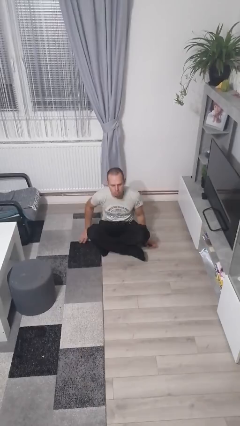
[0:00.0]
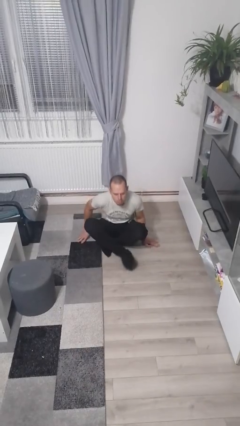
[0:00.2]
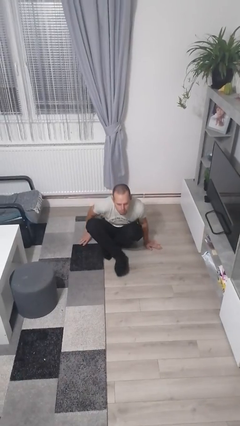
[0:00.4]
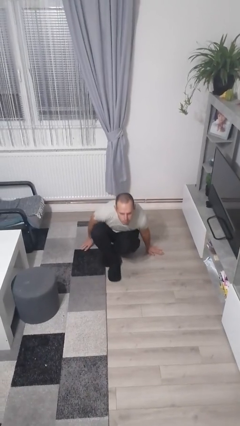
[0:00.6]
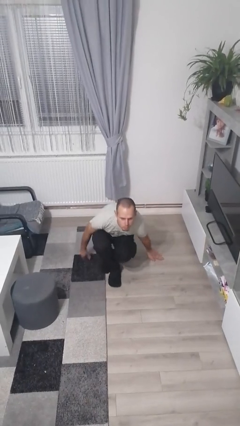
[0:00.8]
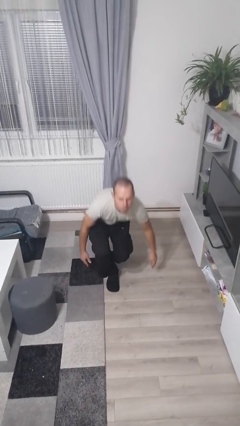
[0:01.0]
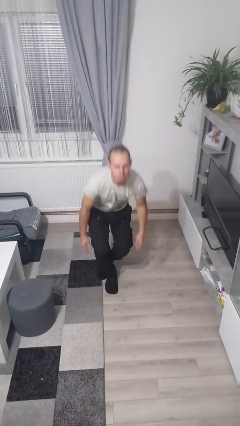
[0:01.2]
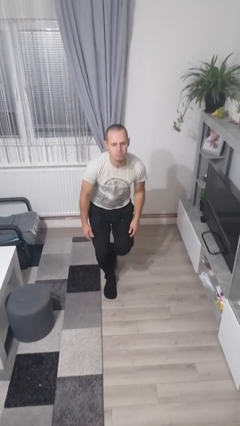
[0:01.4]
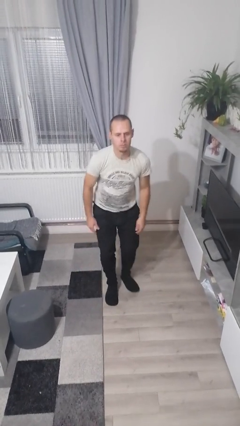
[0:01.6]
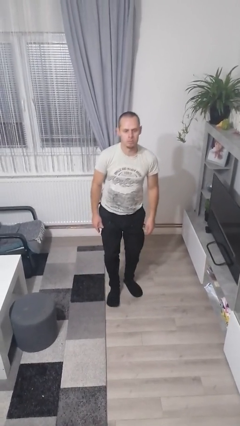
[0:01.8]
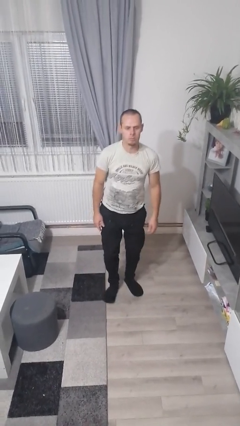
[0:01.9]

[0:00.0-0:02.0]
person stands up from floor

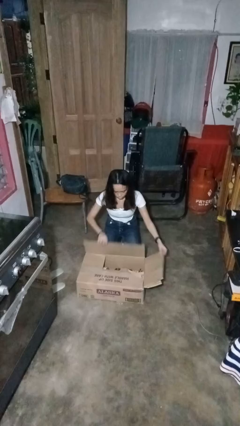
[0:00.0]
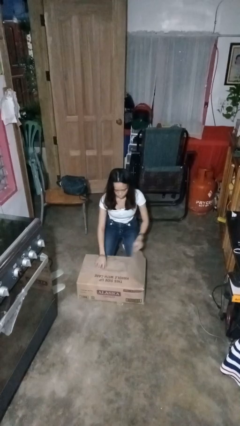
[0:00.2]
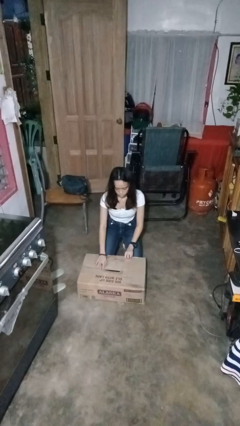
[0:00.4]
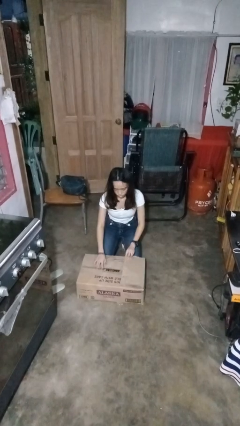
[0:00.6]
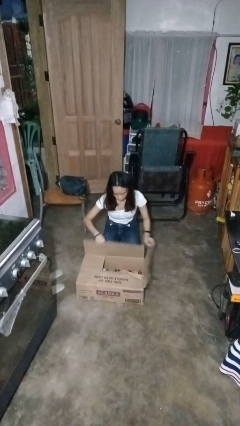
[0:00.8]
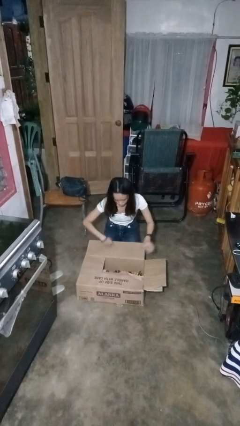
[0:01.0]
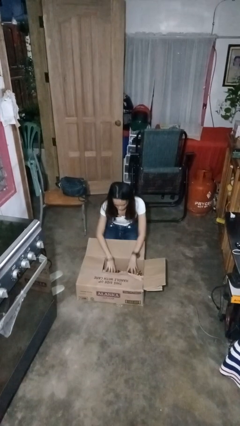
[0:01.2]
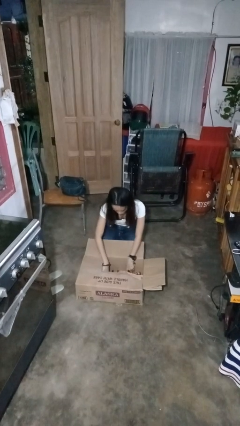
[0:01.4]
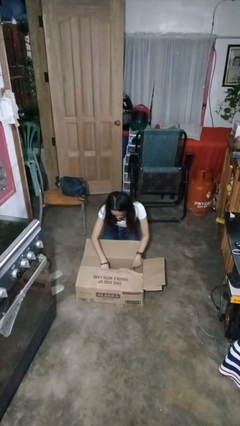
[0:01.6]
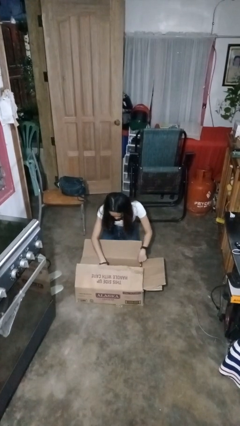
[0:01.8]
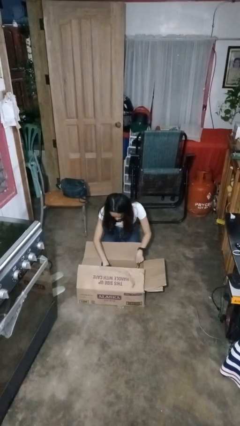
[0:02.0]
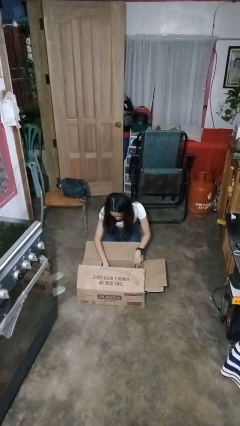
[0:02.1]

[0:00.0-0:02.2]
person searches in box

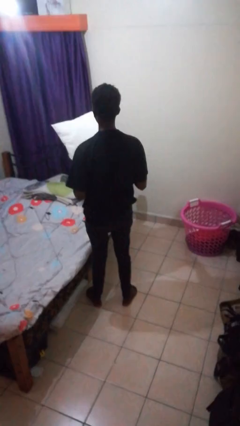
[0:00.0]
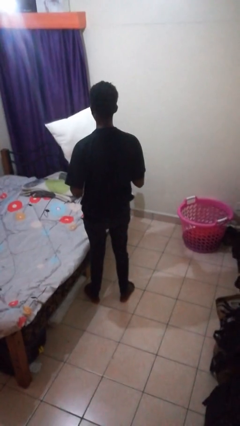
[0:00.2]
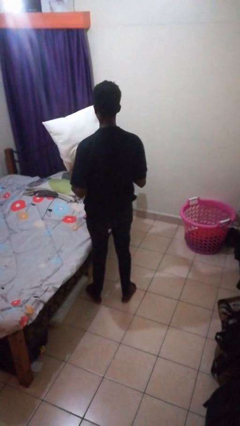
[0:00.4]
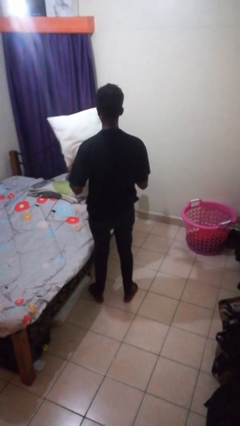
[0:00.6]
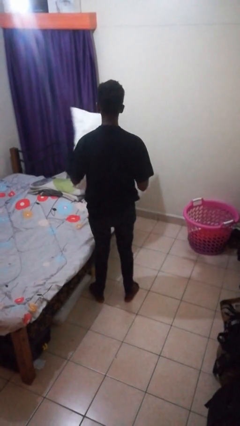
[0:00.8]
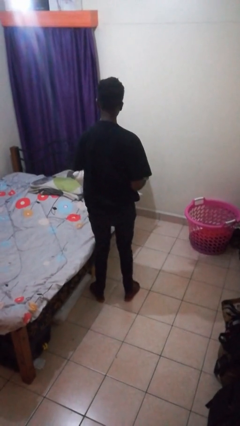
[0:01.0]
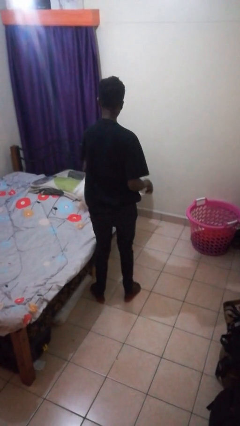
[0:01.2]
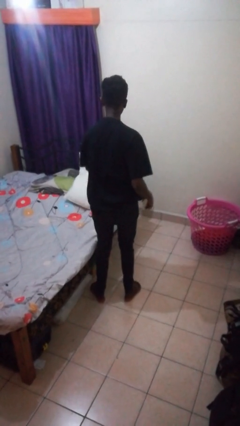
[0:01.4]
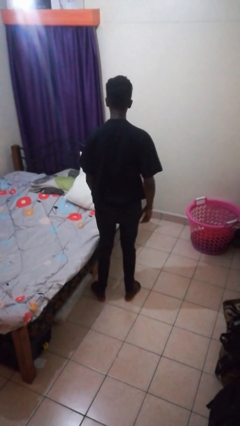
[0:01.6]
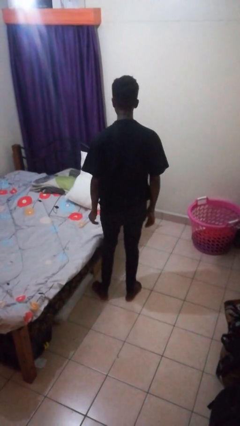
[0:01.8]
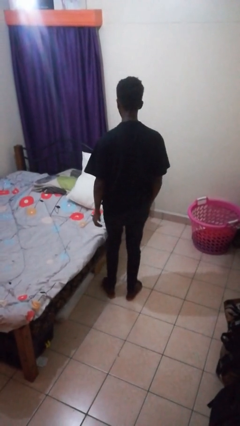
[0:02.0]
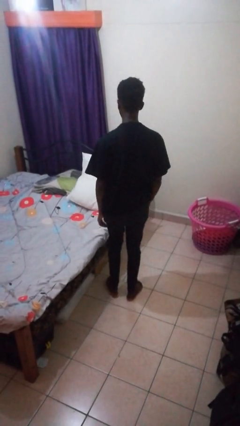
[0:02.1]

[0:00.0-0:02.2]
person puts down object on bed

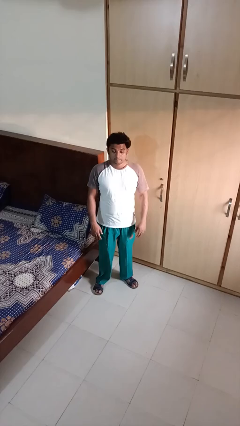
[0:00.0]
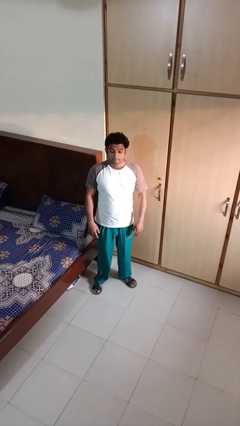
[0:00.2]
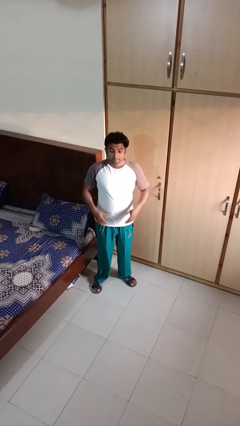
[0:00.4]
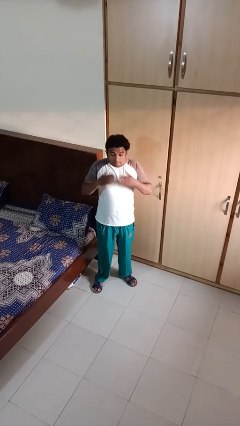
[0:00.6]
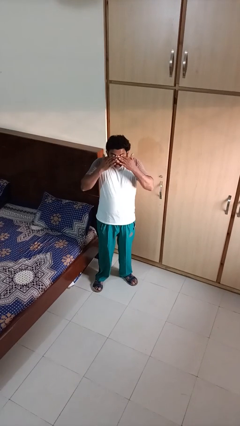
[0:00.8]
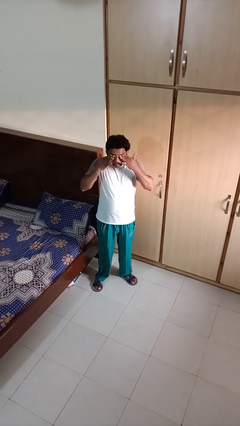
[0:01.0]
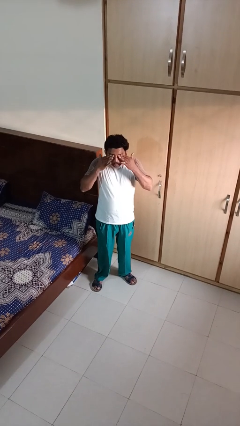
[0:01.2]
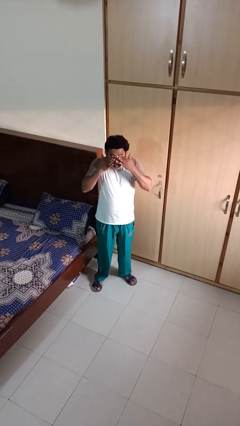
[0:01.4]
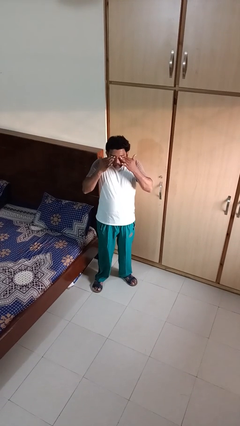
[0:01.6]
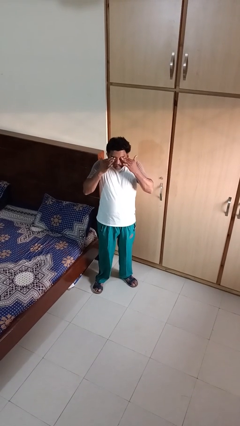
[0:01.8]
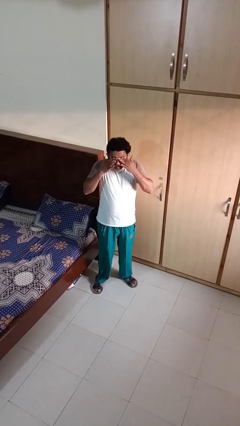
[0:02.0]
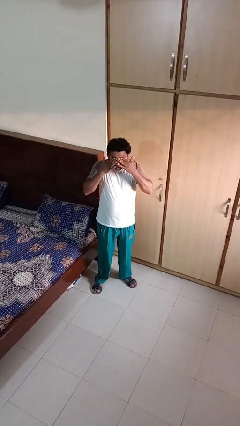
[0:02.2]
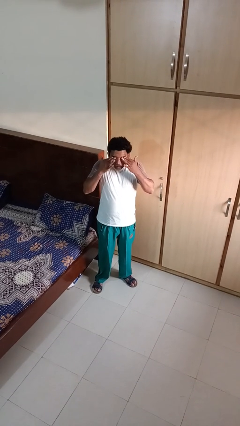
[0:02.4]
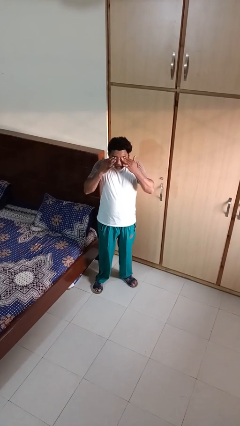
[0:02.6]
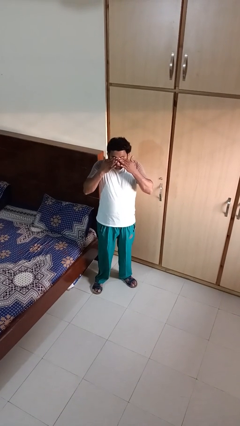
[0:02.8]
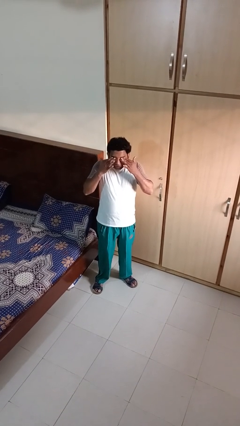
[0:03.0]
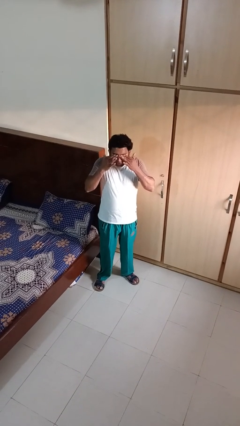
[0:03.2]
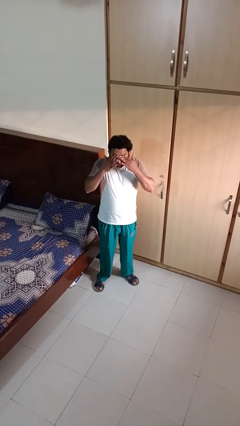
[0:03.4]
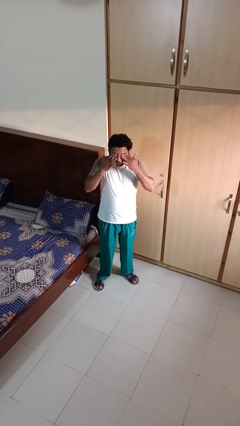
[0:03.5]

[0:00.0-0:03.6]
person rubs eyes

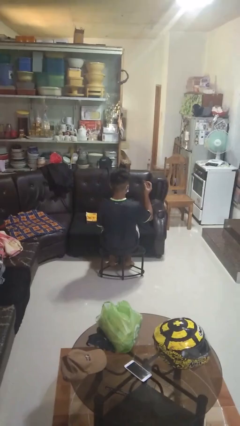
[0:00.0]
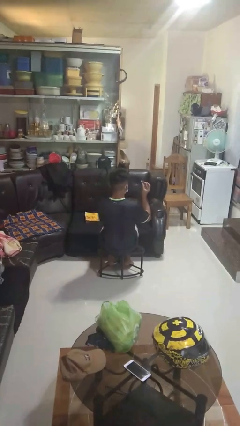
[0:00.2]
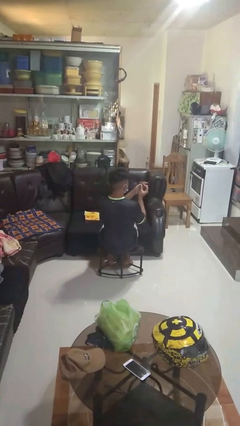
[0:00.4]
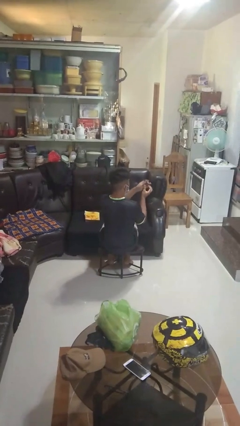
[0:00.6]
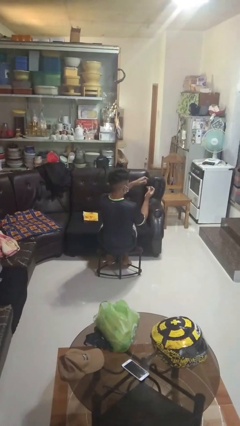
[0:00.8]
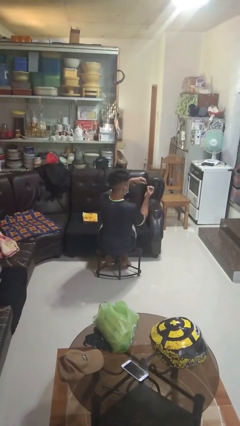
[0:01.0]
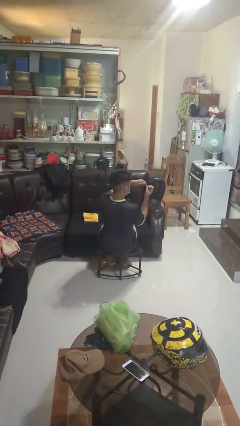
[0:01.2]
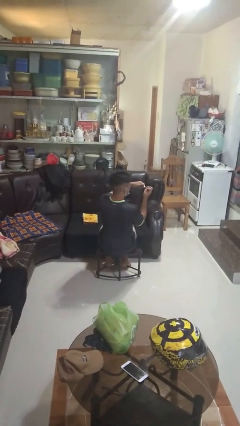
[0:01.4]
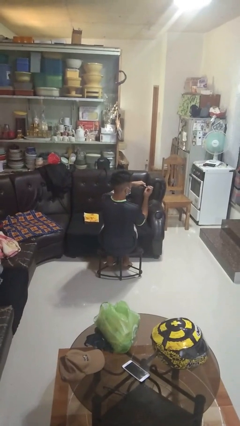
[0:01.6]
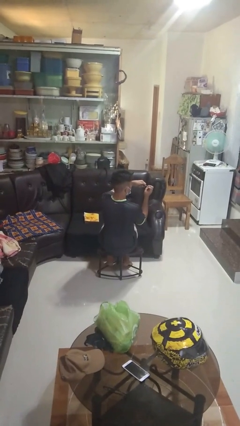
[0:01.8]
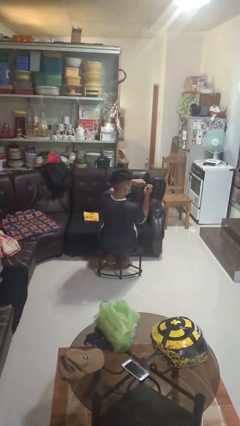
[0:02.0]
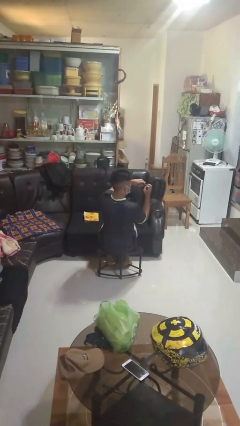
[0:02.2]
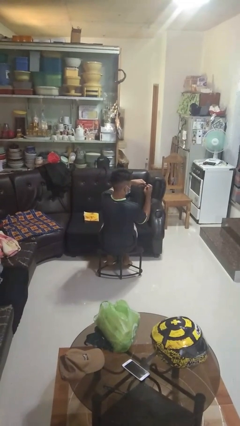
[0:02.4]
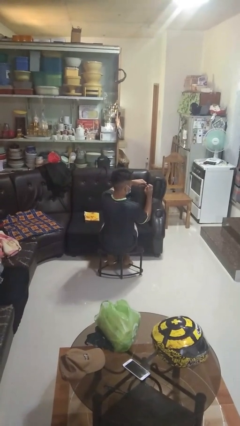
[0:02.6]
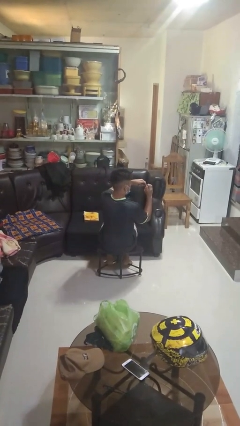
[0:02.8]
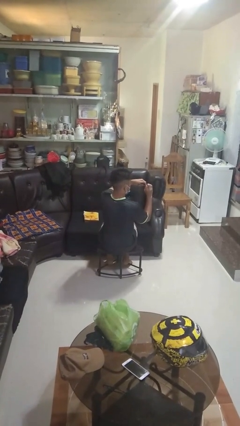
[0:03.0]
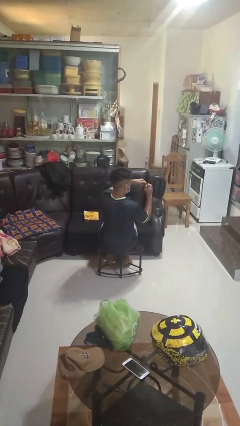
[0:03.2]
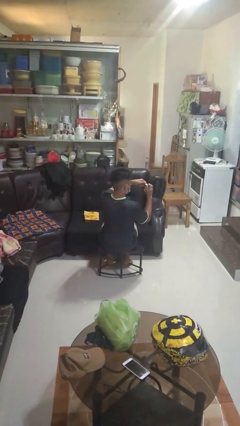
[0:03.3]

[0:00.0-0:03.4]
person clips fingernails

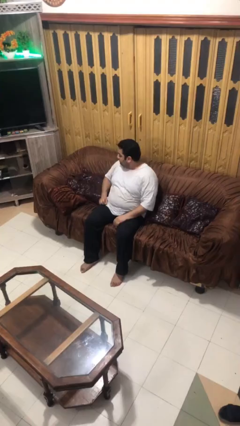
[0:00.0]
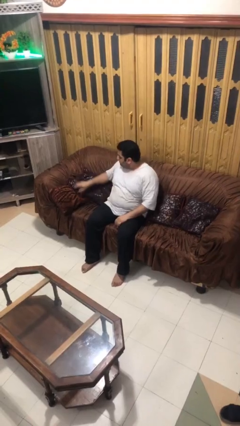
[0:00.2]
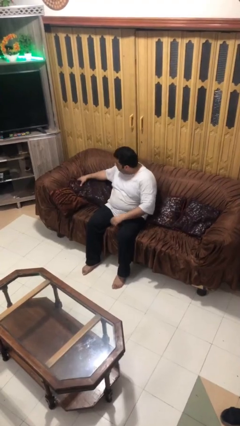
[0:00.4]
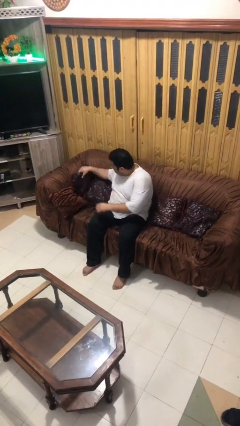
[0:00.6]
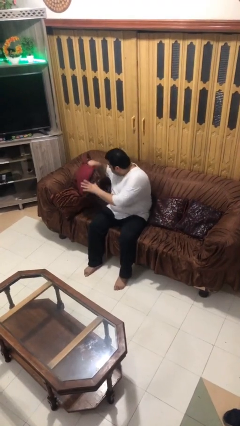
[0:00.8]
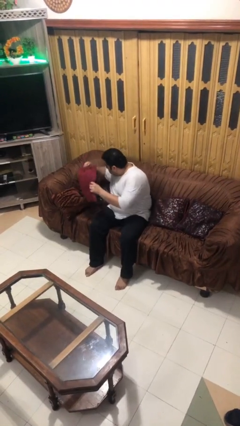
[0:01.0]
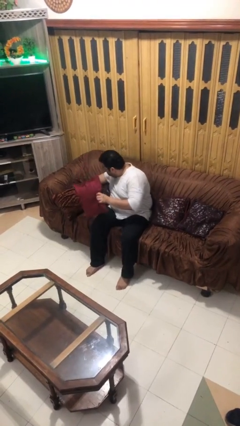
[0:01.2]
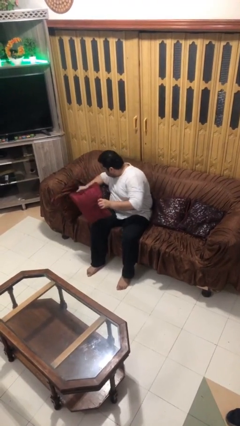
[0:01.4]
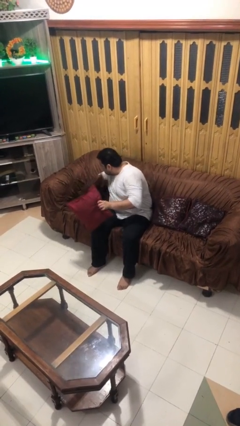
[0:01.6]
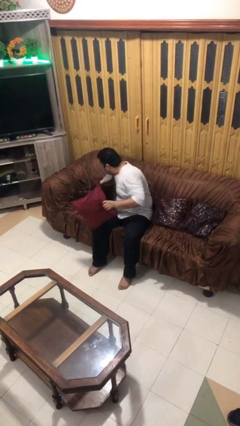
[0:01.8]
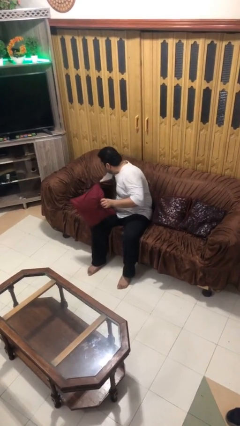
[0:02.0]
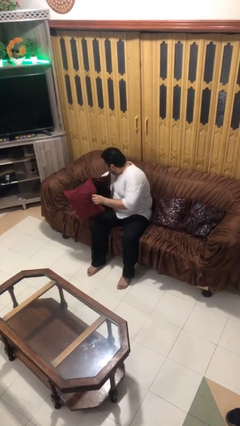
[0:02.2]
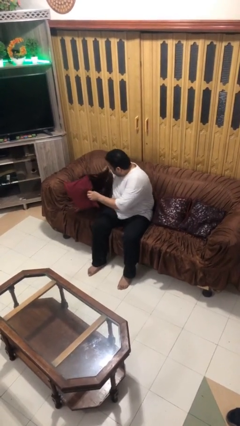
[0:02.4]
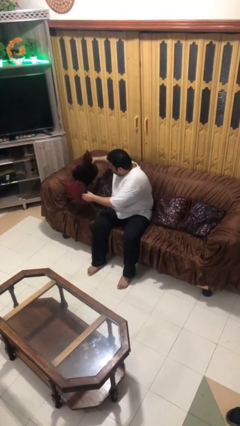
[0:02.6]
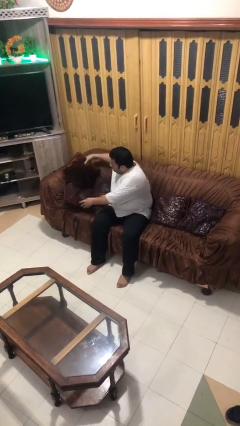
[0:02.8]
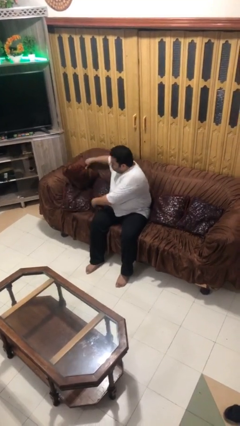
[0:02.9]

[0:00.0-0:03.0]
person searches in couch

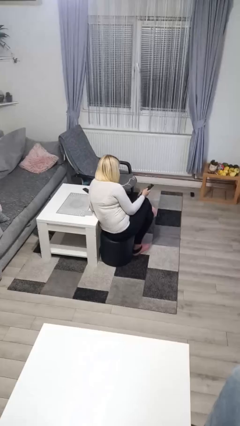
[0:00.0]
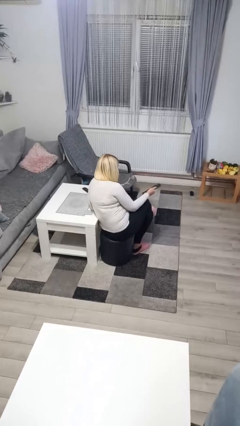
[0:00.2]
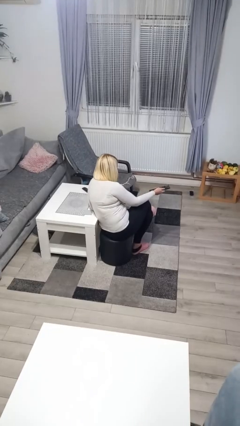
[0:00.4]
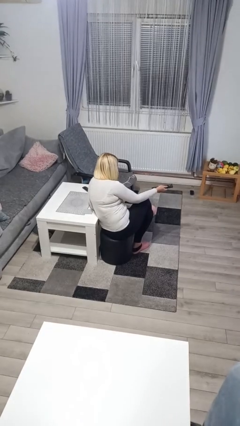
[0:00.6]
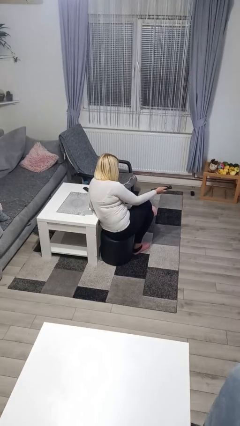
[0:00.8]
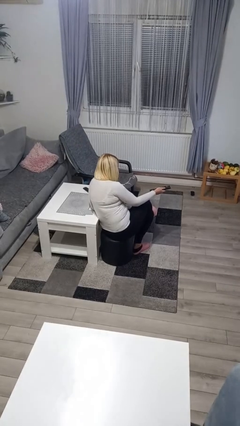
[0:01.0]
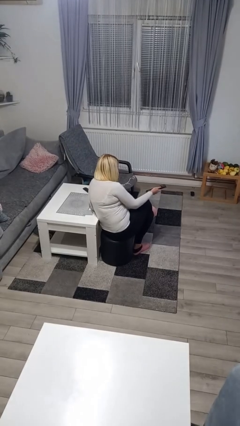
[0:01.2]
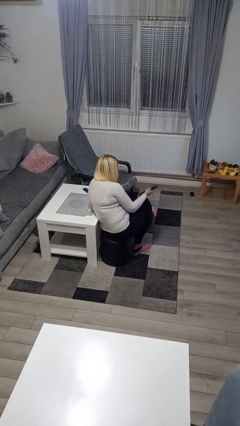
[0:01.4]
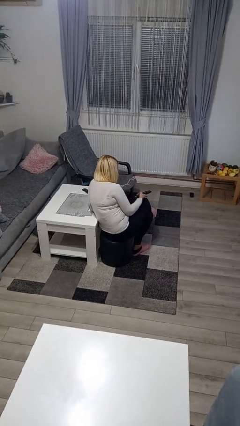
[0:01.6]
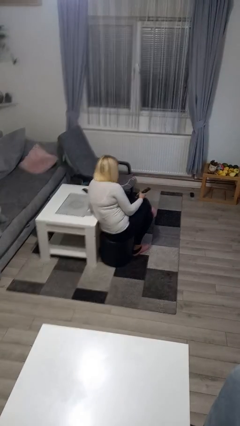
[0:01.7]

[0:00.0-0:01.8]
person uses television remote
